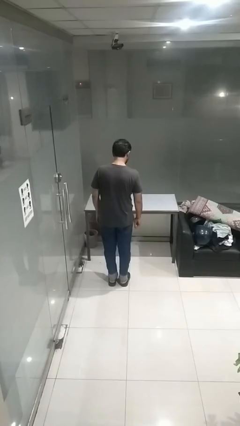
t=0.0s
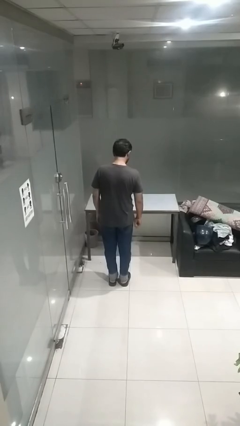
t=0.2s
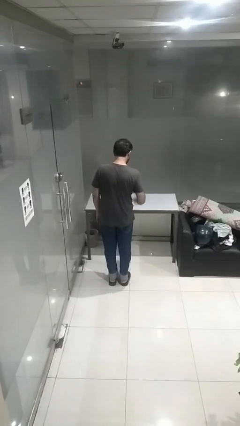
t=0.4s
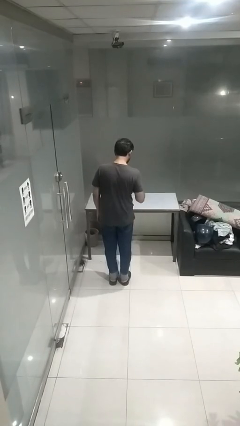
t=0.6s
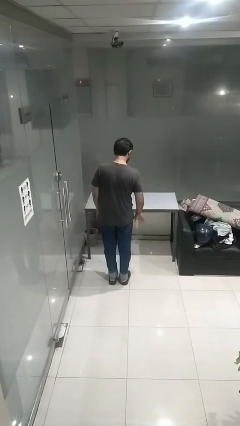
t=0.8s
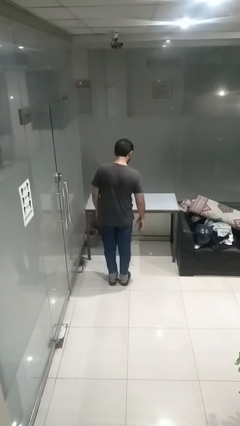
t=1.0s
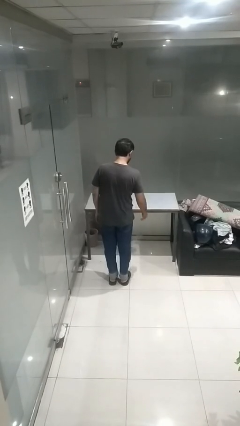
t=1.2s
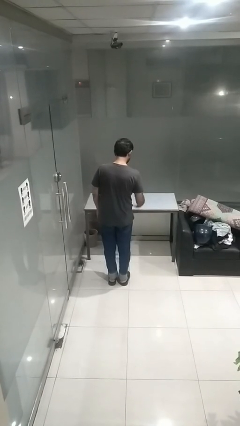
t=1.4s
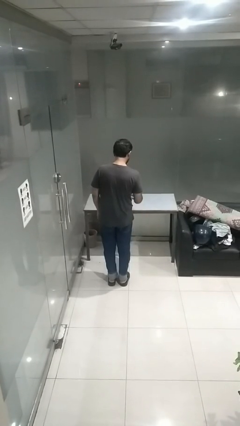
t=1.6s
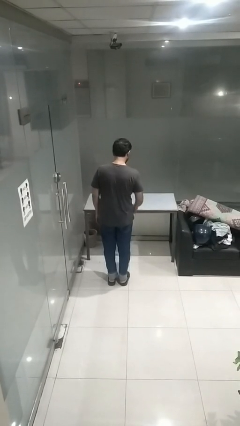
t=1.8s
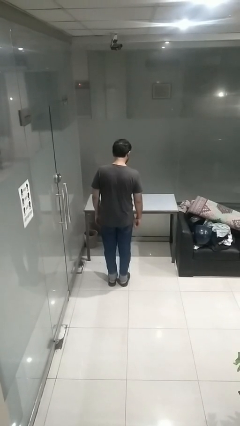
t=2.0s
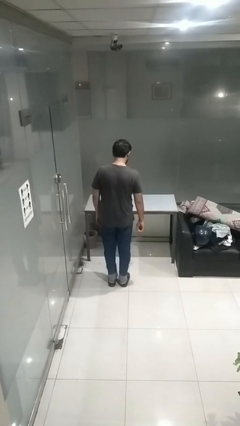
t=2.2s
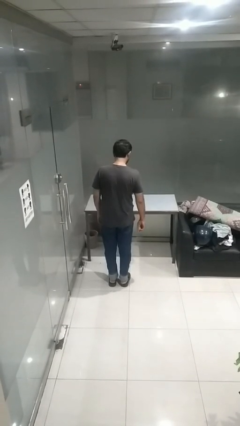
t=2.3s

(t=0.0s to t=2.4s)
person bounces ball on floor

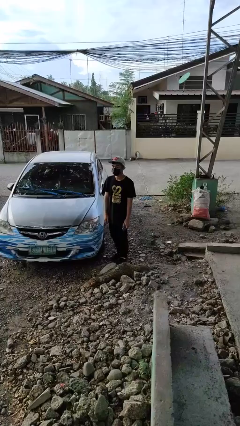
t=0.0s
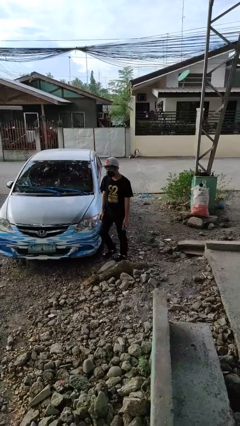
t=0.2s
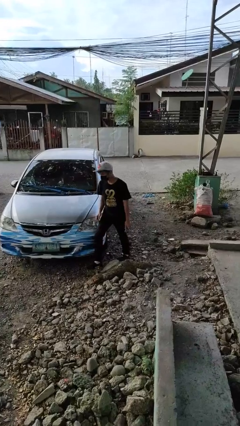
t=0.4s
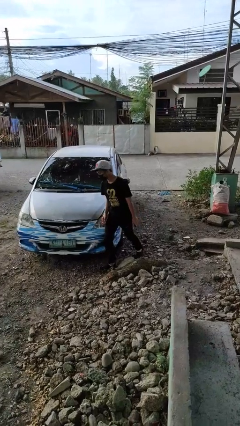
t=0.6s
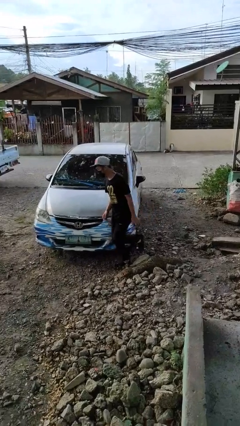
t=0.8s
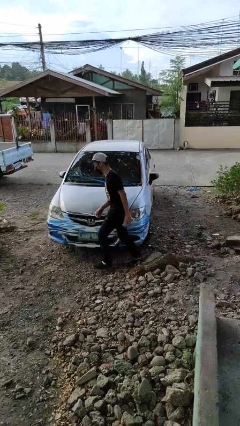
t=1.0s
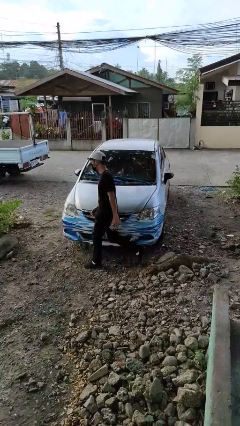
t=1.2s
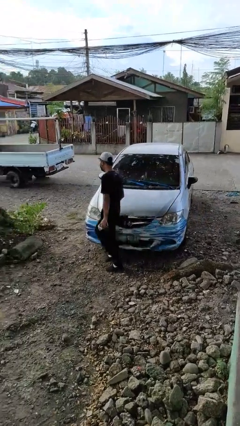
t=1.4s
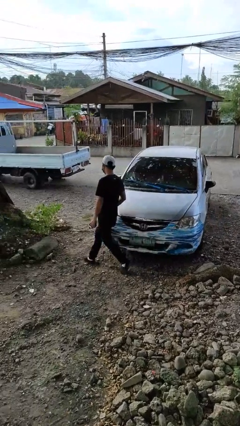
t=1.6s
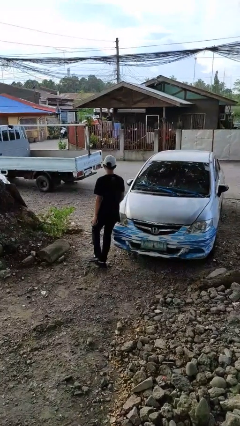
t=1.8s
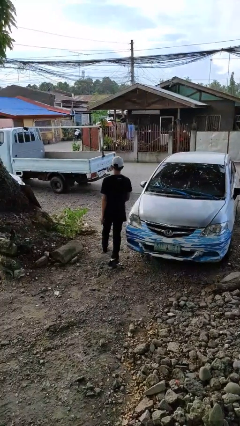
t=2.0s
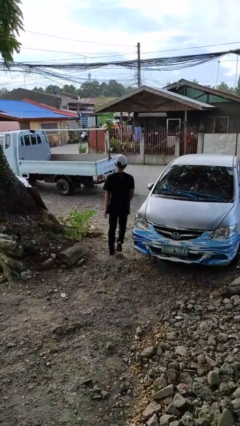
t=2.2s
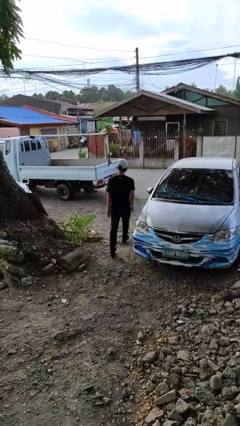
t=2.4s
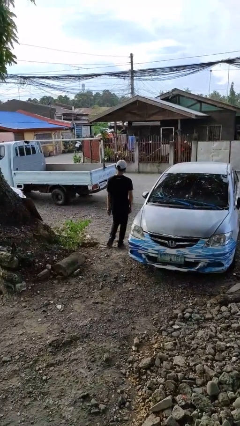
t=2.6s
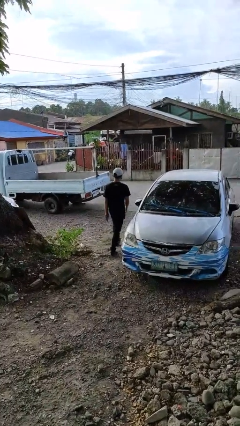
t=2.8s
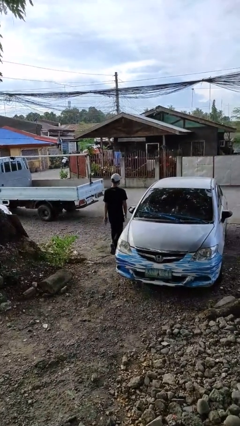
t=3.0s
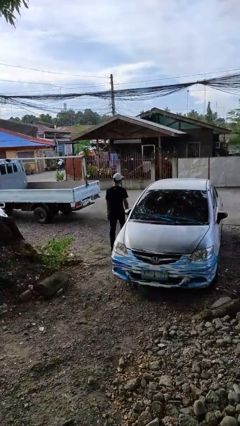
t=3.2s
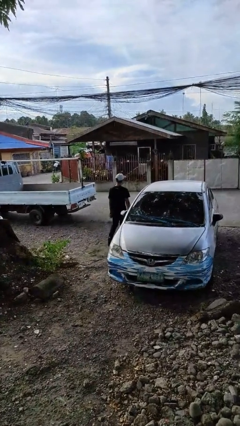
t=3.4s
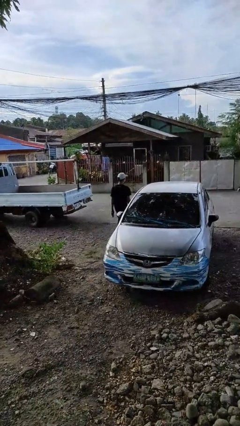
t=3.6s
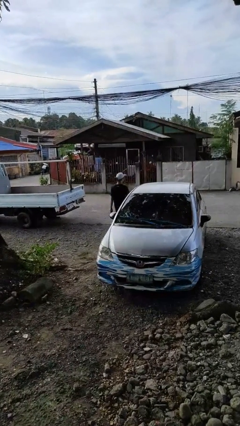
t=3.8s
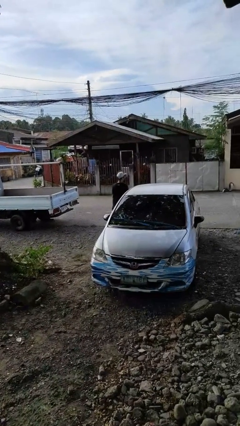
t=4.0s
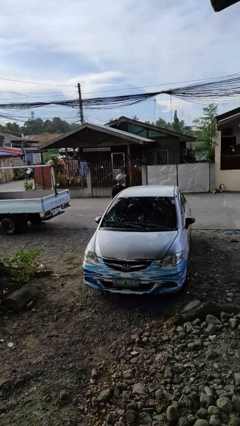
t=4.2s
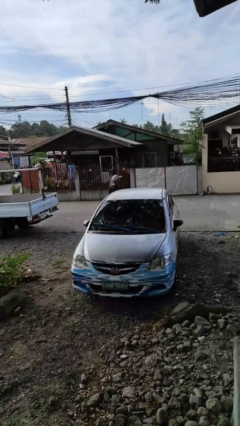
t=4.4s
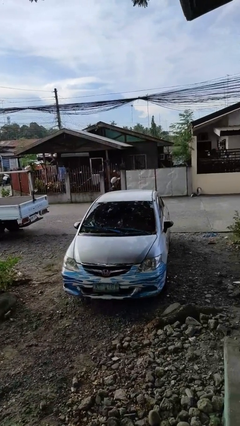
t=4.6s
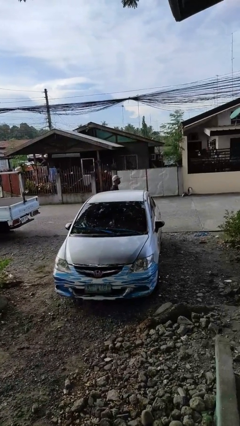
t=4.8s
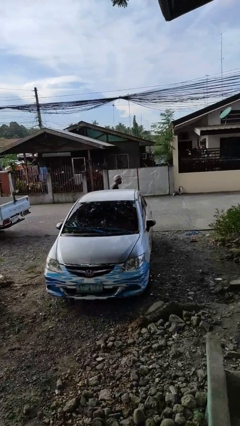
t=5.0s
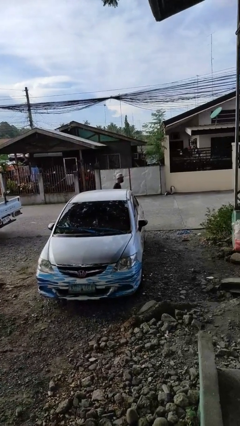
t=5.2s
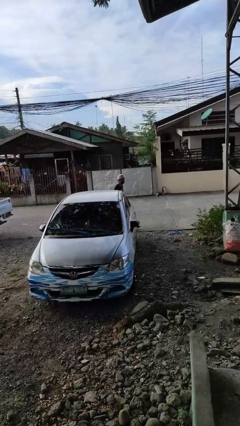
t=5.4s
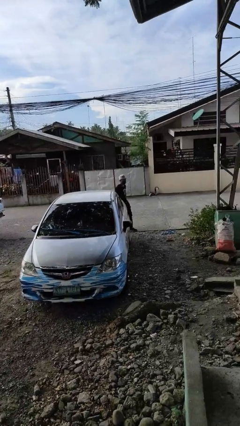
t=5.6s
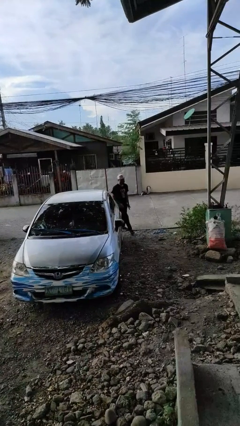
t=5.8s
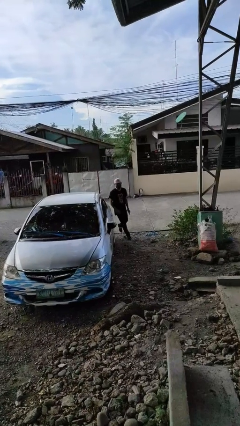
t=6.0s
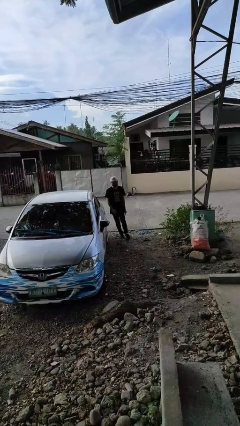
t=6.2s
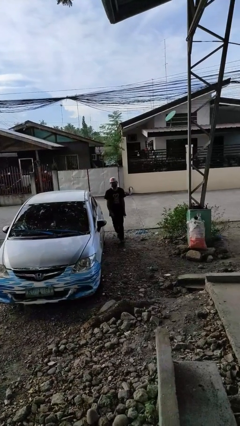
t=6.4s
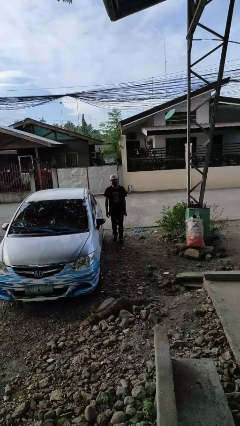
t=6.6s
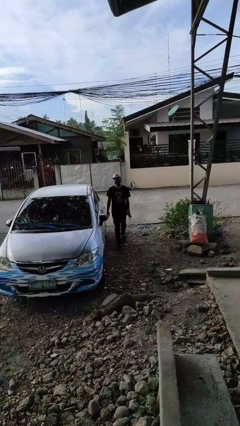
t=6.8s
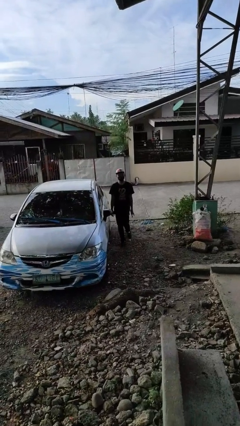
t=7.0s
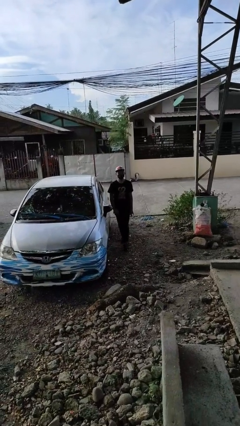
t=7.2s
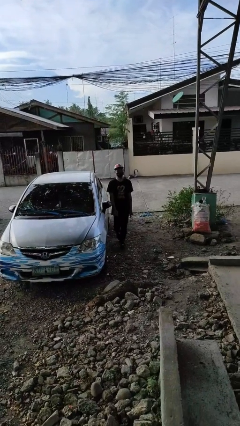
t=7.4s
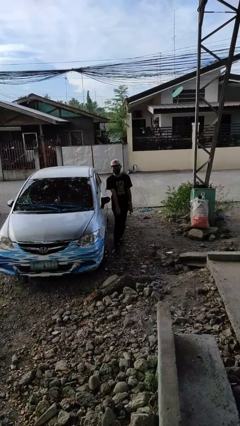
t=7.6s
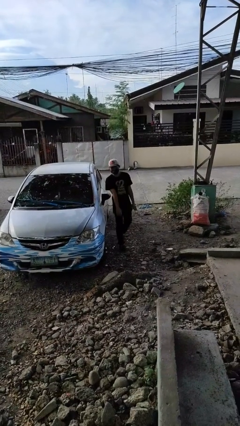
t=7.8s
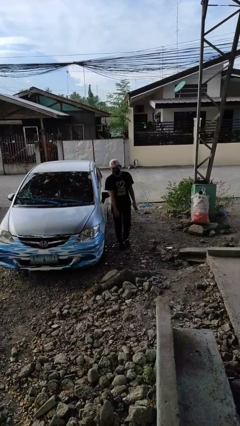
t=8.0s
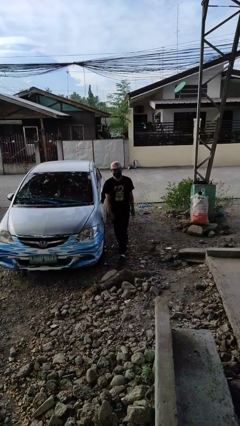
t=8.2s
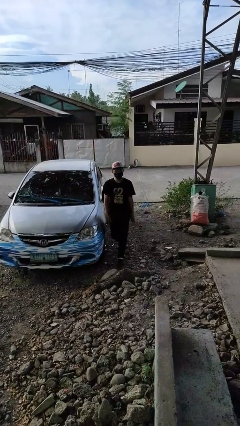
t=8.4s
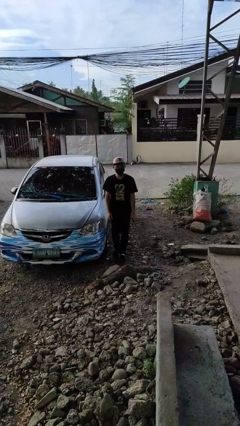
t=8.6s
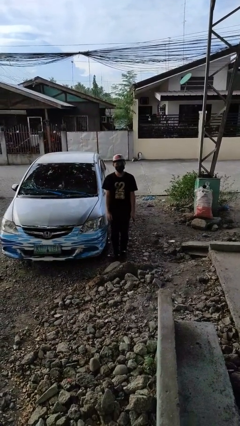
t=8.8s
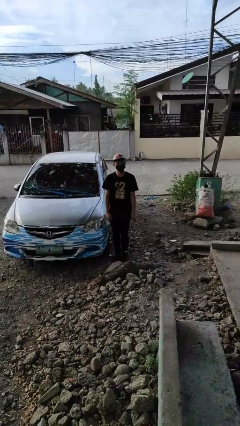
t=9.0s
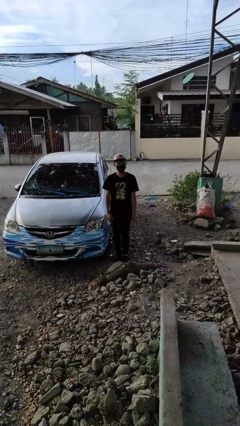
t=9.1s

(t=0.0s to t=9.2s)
person walks around car

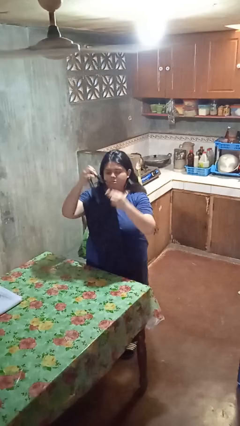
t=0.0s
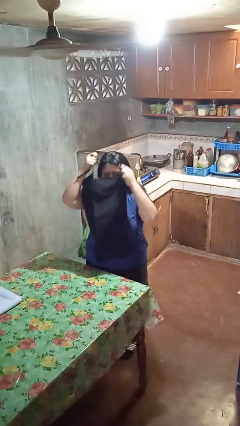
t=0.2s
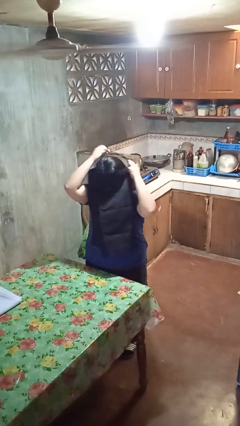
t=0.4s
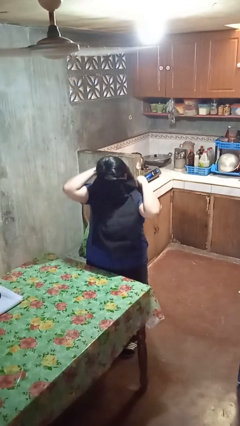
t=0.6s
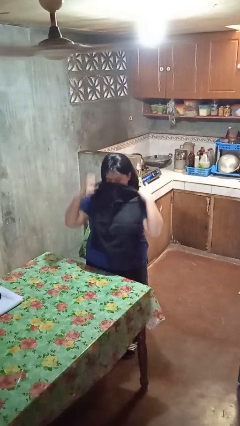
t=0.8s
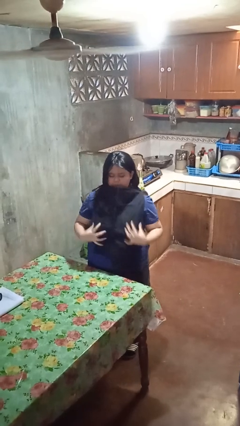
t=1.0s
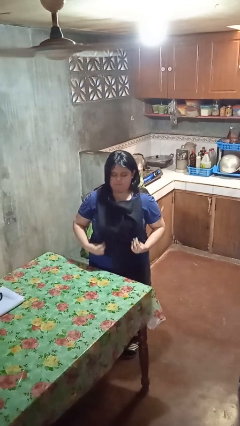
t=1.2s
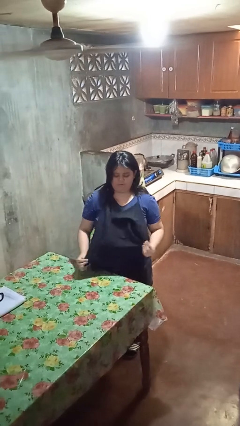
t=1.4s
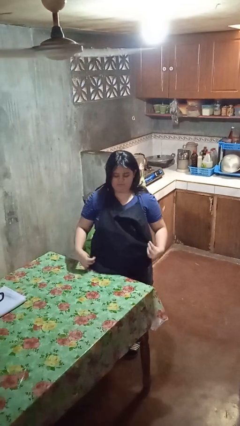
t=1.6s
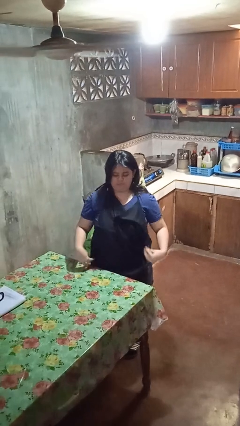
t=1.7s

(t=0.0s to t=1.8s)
person puts on apron

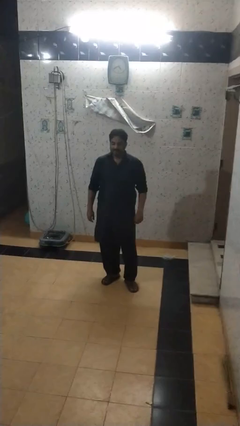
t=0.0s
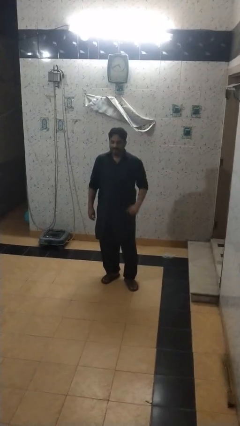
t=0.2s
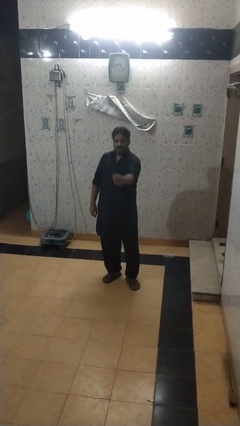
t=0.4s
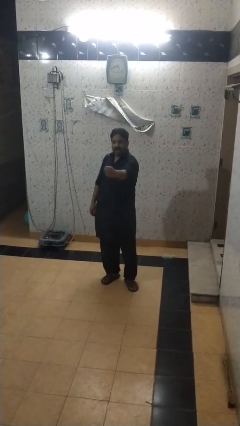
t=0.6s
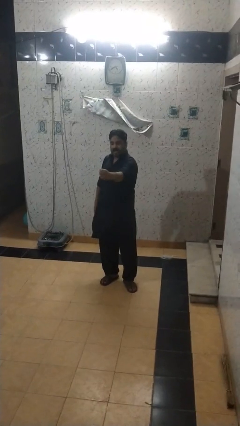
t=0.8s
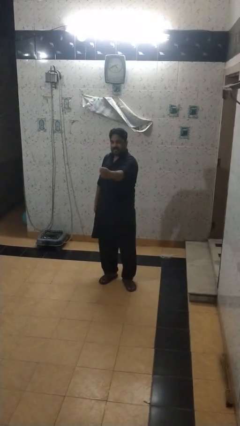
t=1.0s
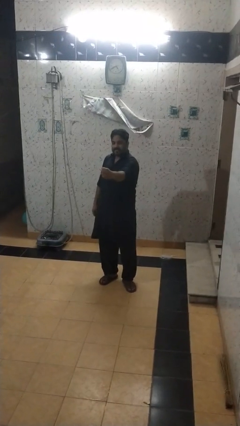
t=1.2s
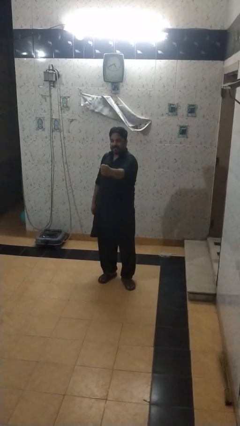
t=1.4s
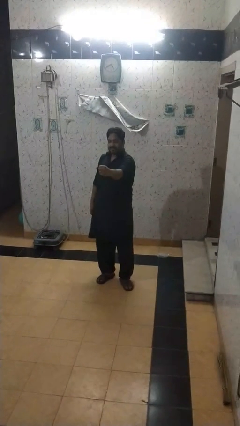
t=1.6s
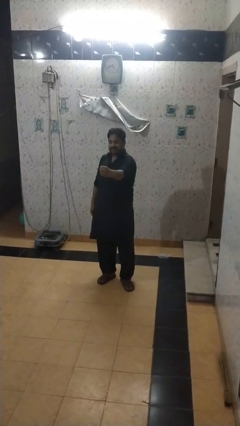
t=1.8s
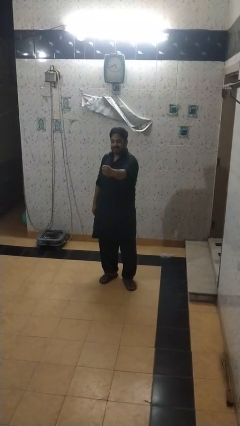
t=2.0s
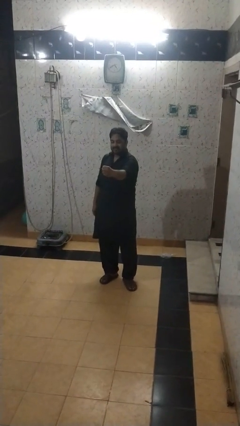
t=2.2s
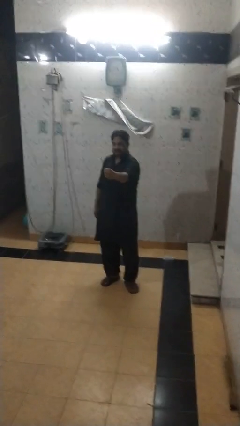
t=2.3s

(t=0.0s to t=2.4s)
person punches

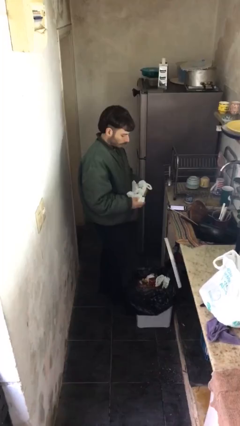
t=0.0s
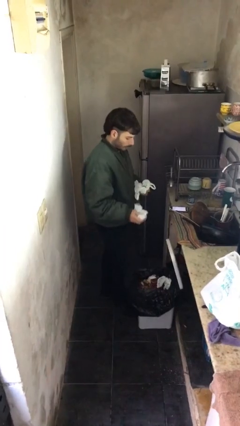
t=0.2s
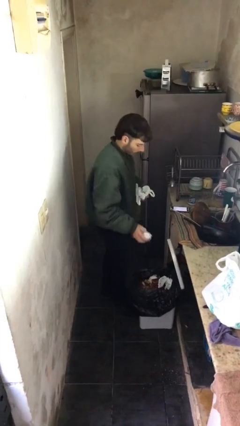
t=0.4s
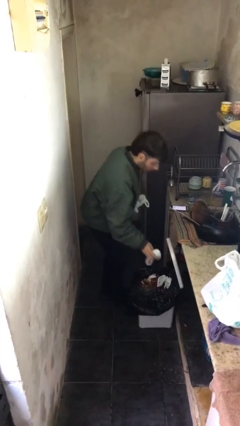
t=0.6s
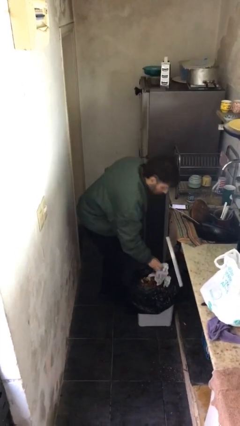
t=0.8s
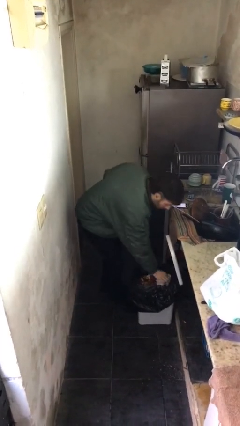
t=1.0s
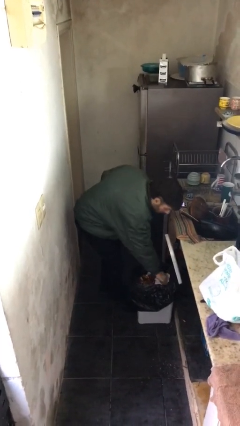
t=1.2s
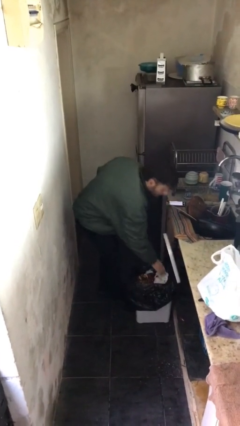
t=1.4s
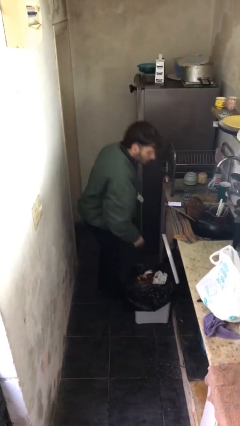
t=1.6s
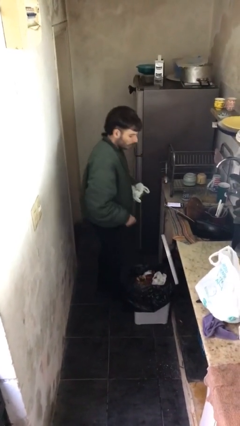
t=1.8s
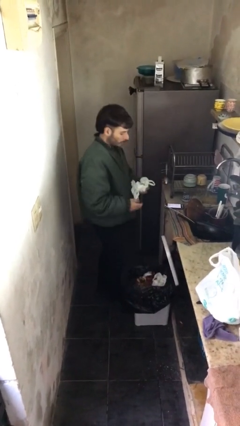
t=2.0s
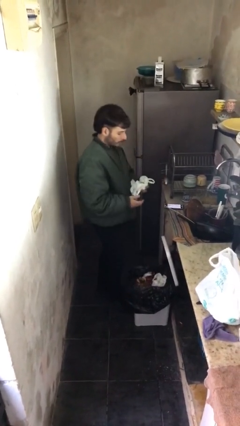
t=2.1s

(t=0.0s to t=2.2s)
person discards trash
